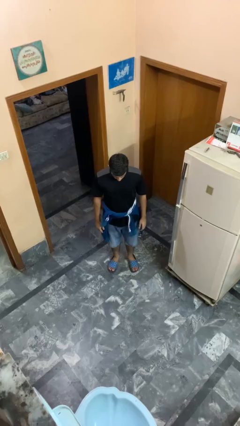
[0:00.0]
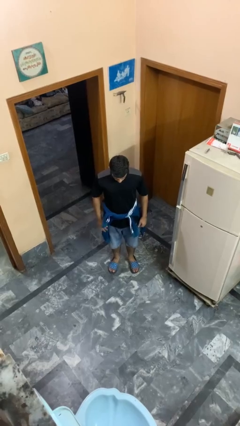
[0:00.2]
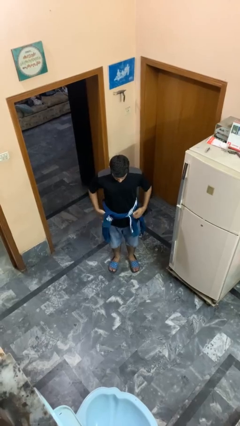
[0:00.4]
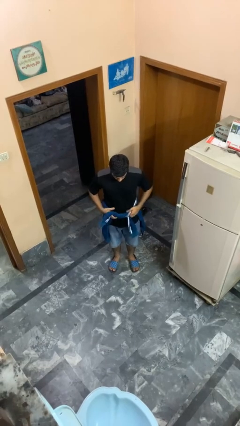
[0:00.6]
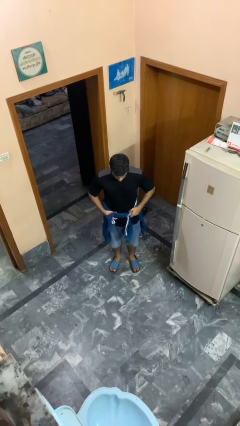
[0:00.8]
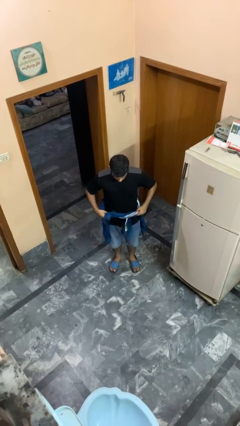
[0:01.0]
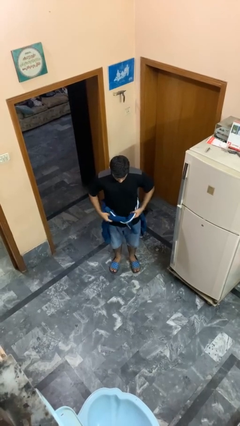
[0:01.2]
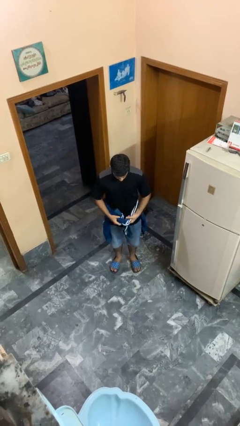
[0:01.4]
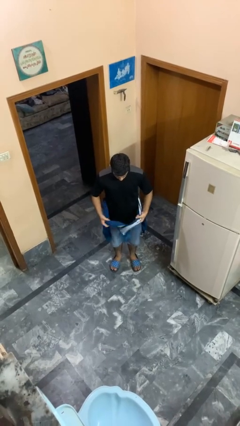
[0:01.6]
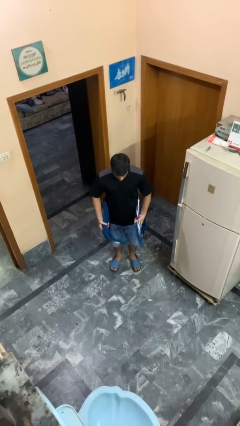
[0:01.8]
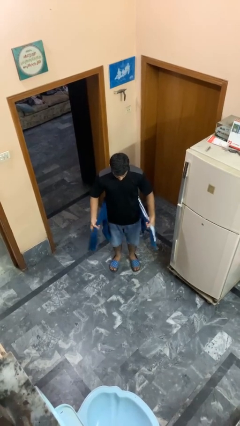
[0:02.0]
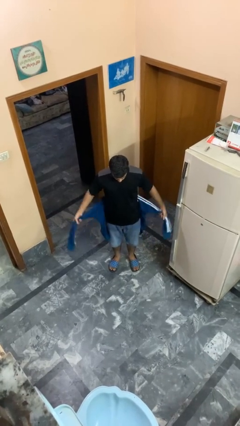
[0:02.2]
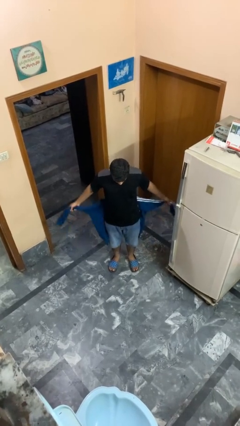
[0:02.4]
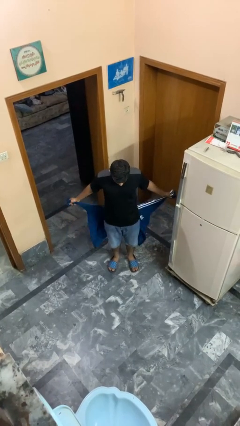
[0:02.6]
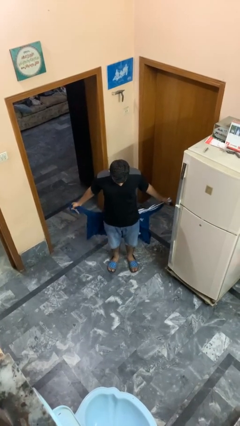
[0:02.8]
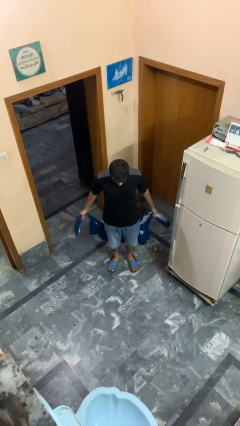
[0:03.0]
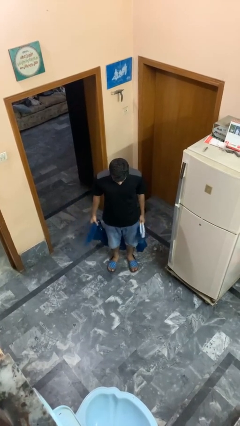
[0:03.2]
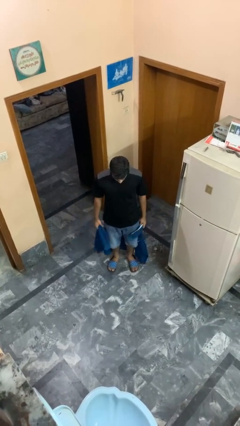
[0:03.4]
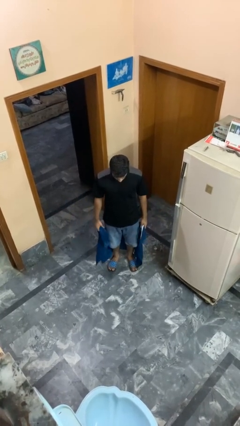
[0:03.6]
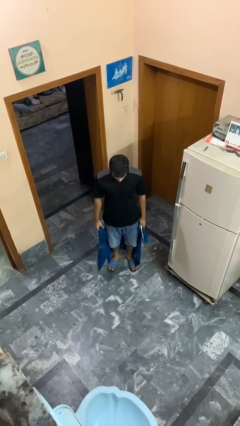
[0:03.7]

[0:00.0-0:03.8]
person unties jacket around waist

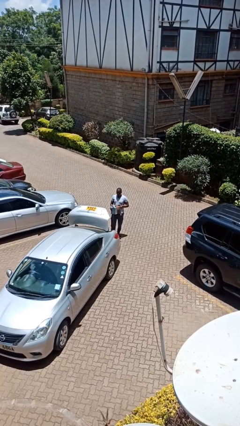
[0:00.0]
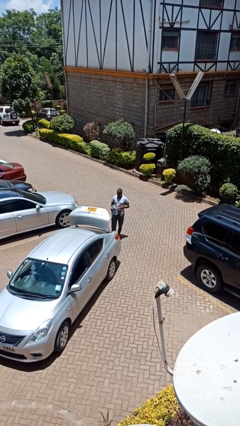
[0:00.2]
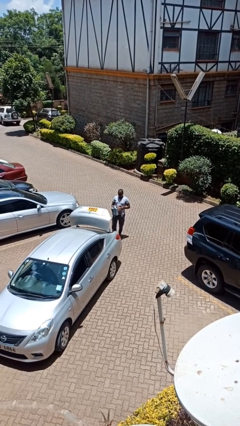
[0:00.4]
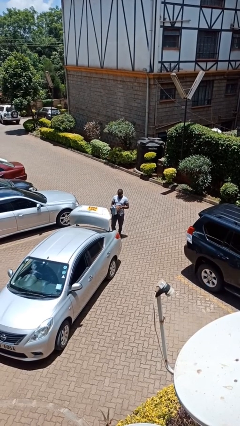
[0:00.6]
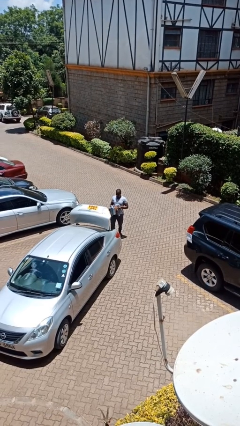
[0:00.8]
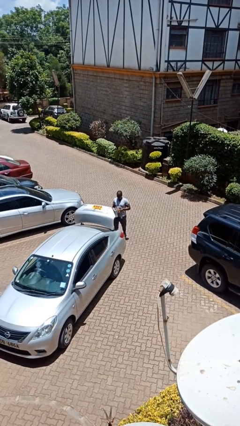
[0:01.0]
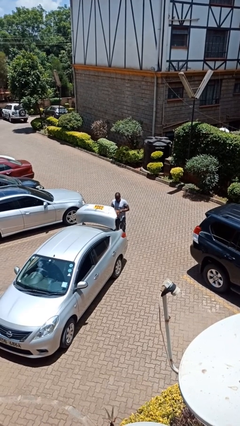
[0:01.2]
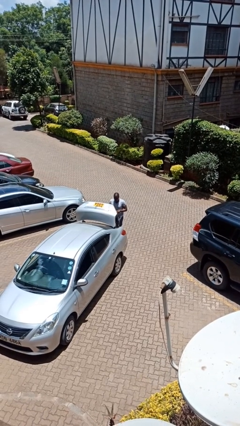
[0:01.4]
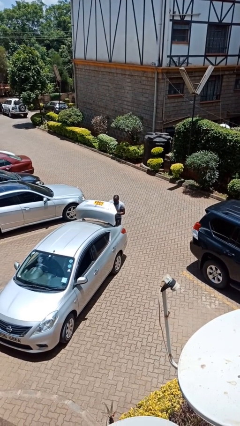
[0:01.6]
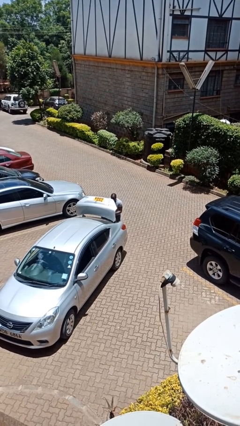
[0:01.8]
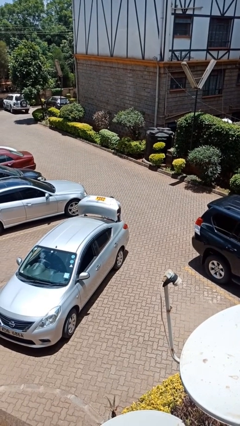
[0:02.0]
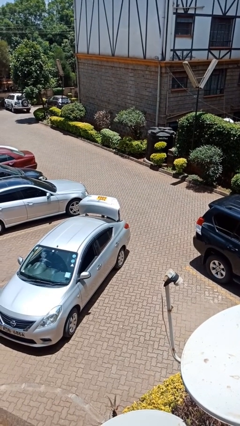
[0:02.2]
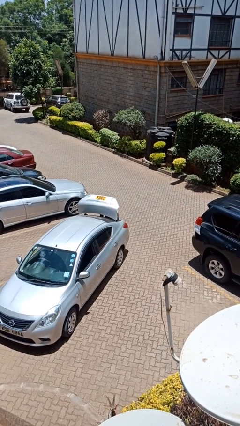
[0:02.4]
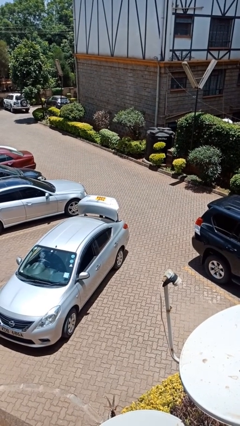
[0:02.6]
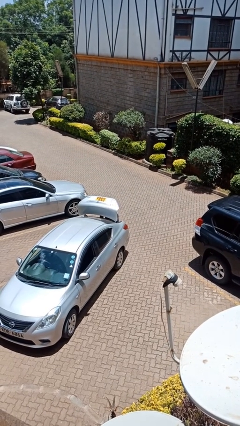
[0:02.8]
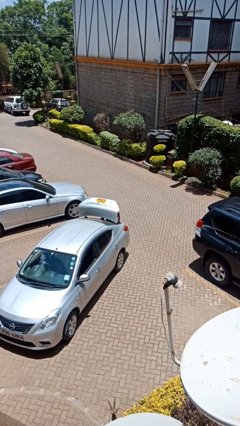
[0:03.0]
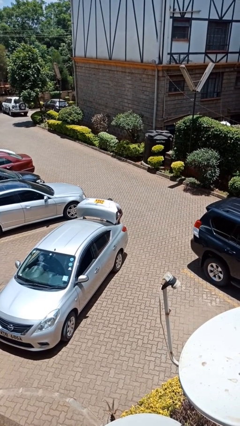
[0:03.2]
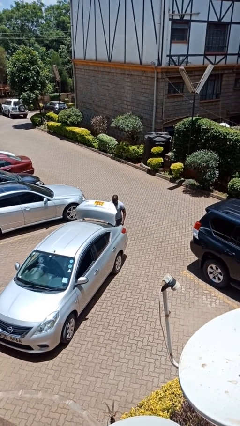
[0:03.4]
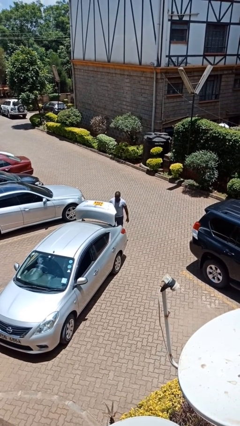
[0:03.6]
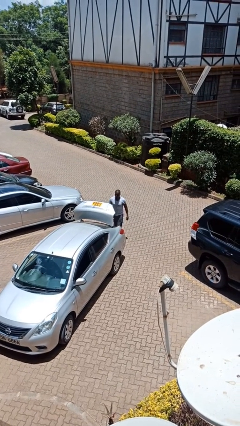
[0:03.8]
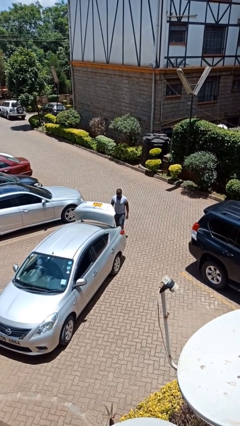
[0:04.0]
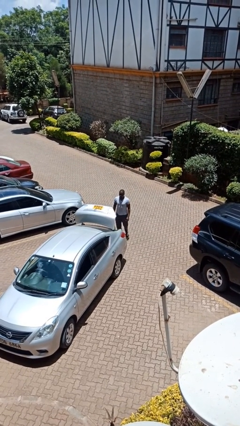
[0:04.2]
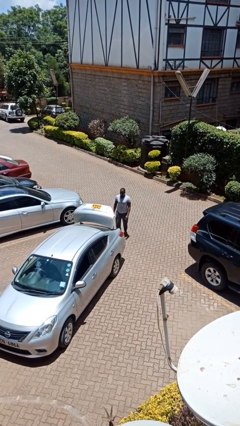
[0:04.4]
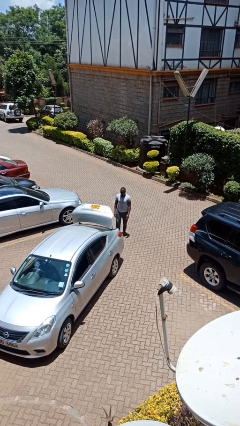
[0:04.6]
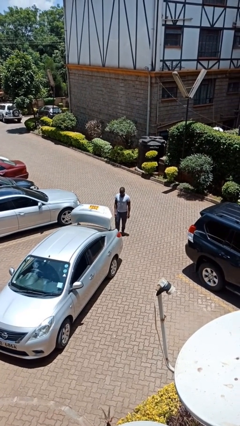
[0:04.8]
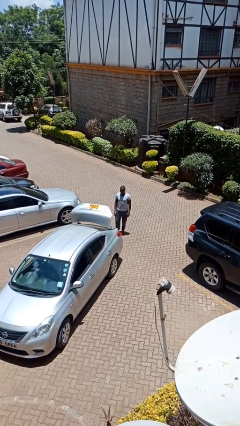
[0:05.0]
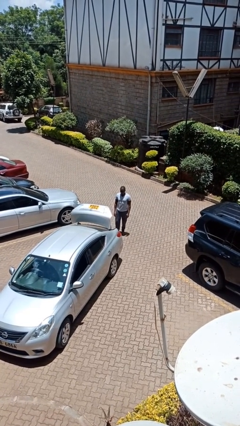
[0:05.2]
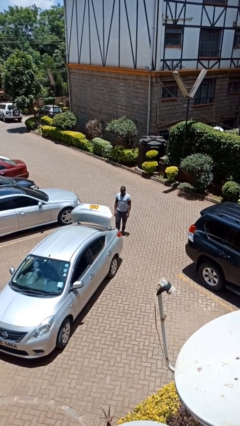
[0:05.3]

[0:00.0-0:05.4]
person loads car

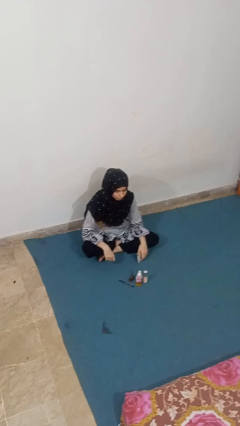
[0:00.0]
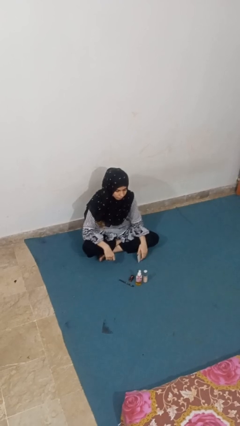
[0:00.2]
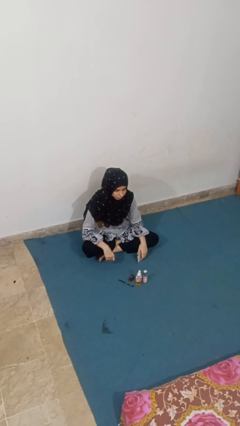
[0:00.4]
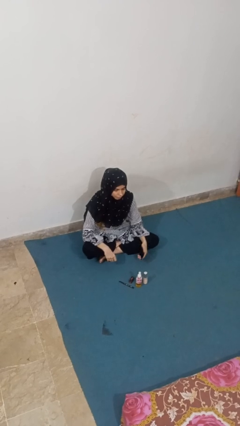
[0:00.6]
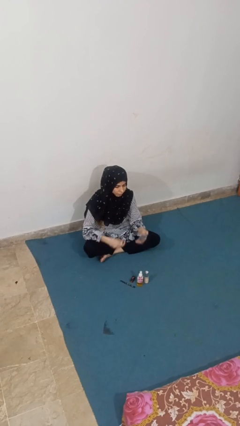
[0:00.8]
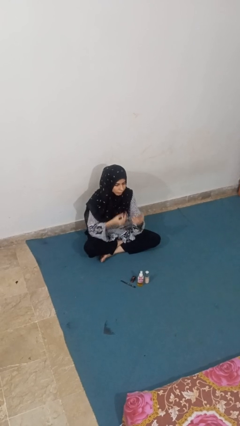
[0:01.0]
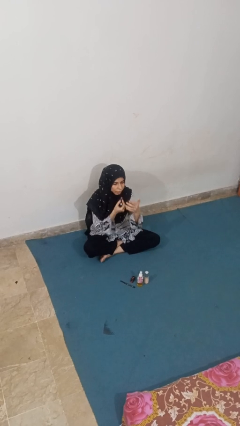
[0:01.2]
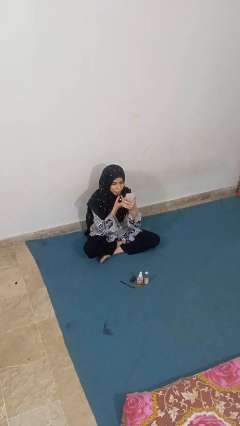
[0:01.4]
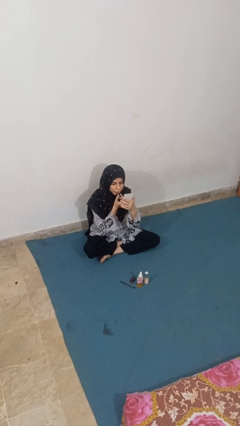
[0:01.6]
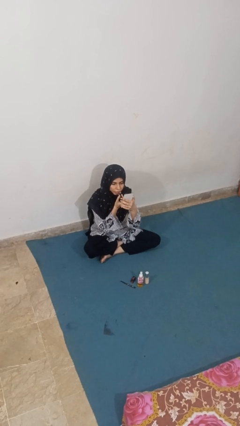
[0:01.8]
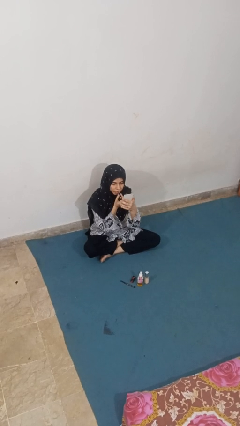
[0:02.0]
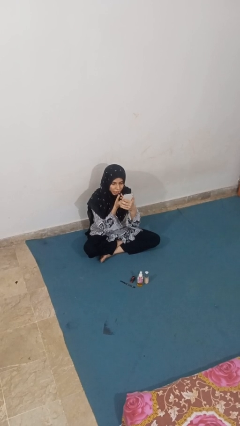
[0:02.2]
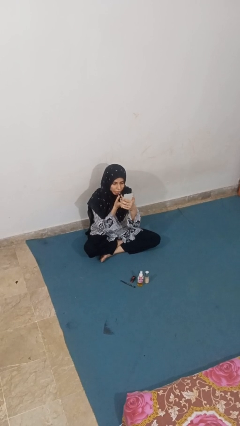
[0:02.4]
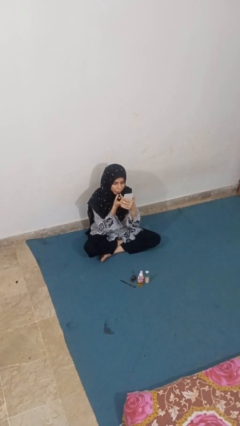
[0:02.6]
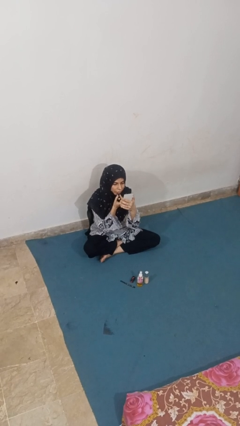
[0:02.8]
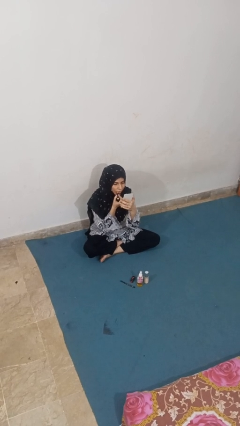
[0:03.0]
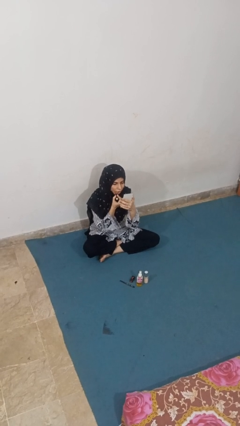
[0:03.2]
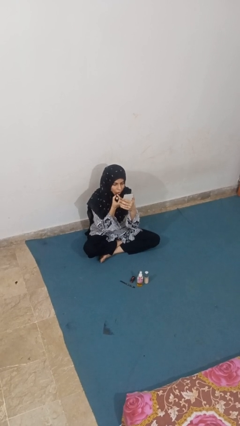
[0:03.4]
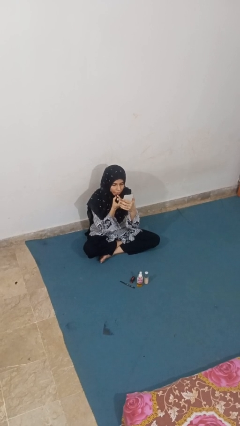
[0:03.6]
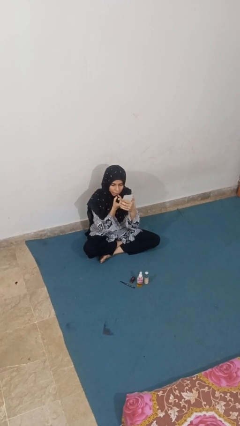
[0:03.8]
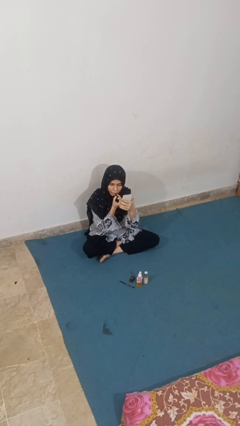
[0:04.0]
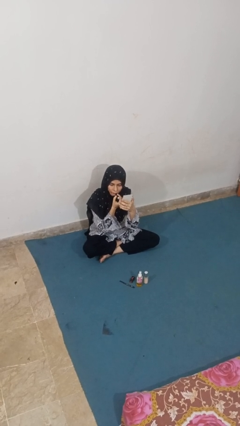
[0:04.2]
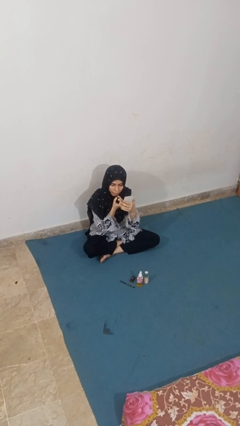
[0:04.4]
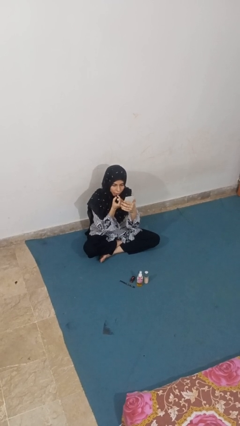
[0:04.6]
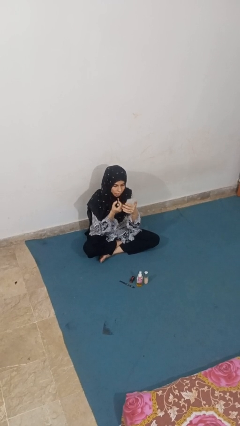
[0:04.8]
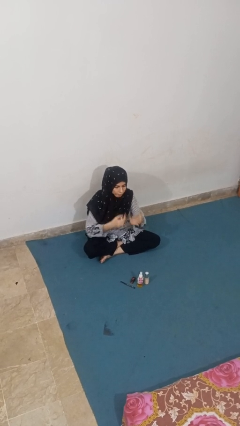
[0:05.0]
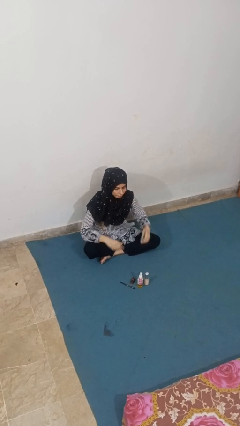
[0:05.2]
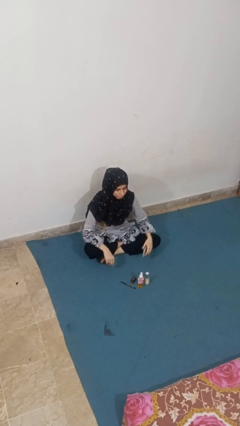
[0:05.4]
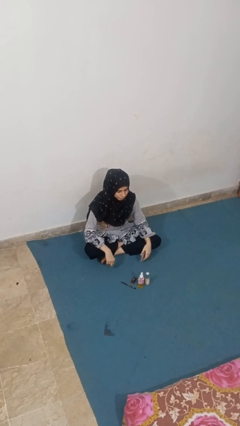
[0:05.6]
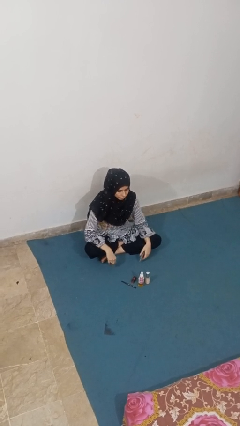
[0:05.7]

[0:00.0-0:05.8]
person applies lip makeup

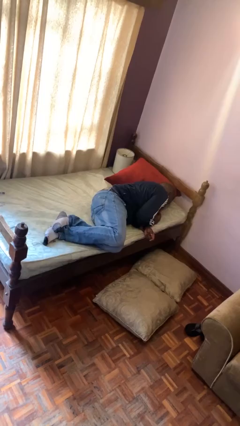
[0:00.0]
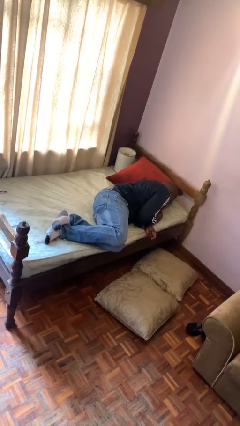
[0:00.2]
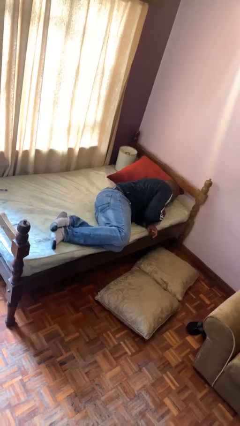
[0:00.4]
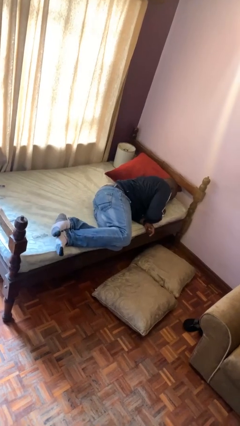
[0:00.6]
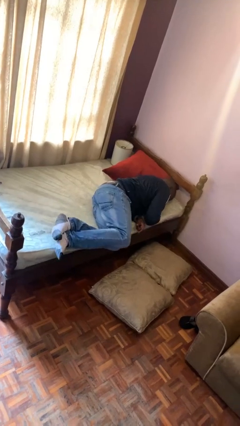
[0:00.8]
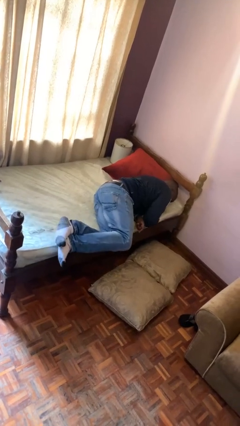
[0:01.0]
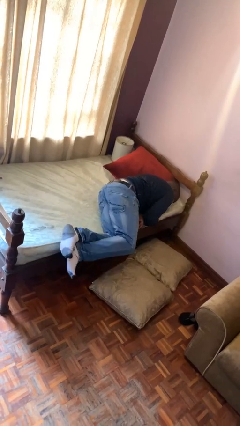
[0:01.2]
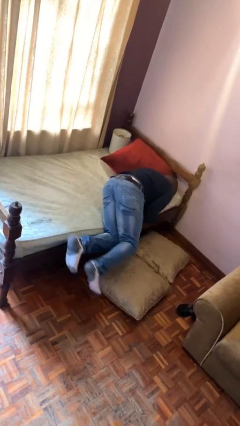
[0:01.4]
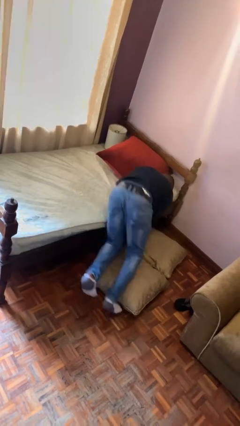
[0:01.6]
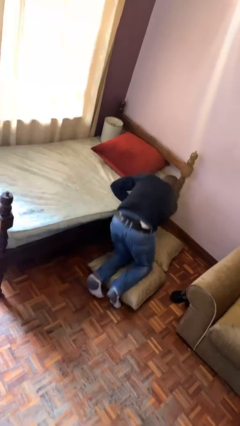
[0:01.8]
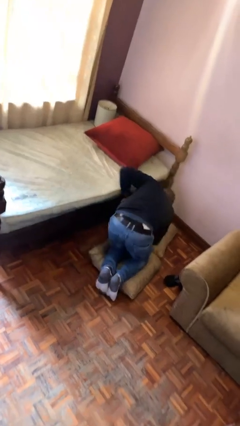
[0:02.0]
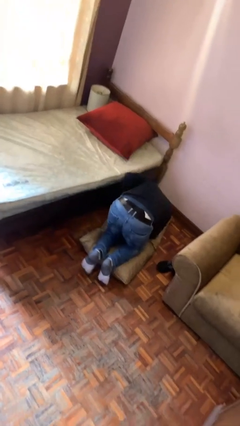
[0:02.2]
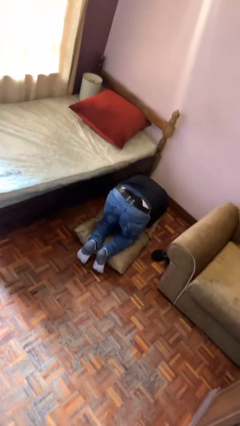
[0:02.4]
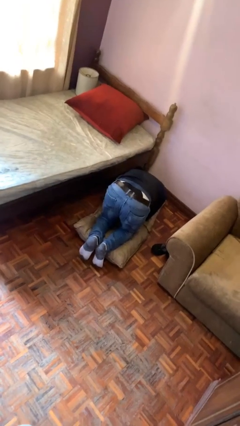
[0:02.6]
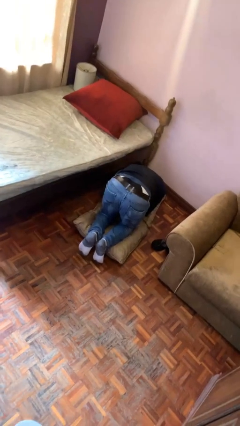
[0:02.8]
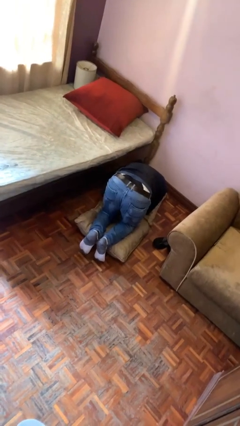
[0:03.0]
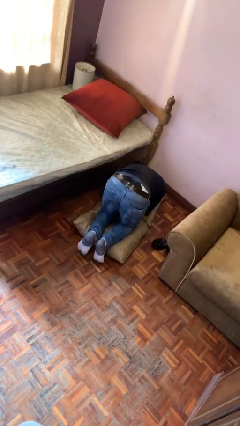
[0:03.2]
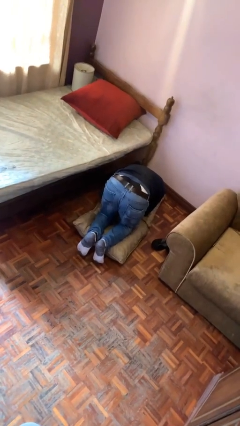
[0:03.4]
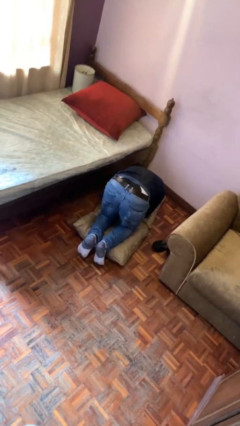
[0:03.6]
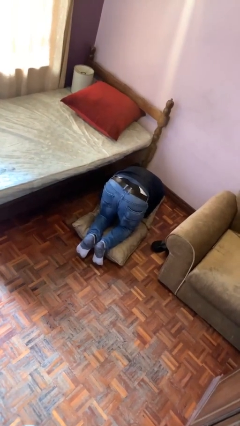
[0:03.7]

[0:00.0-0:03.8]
person falls from bed
